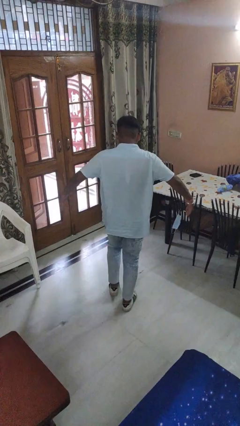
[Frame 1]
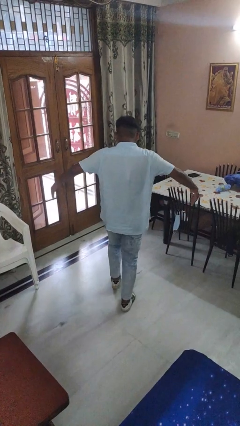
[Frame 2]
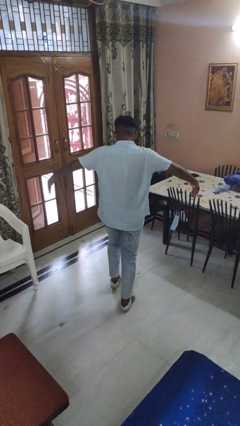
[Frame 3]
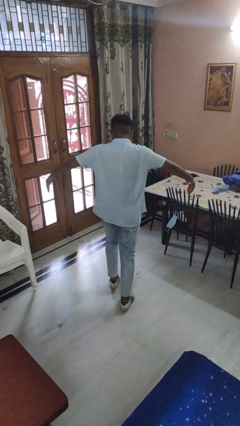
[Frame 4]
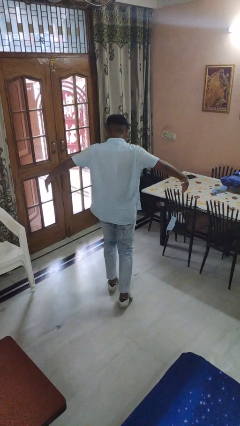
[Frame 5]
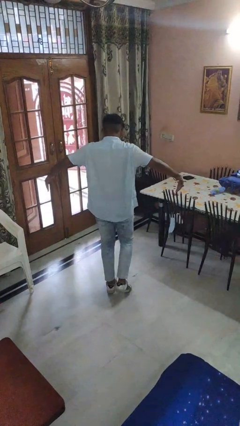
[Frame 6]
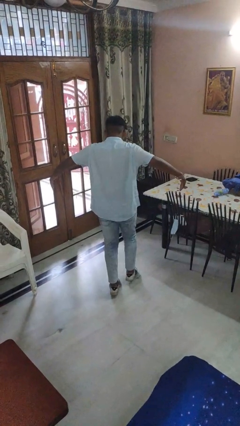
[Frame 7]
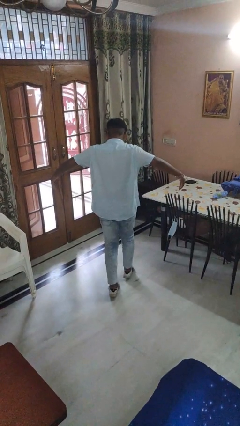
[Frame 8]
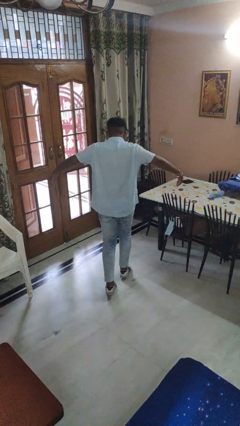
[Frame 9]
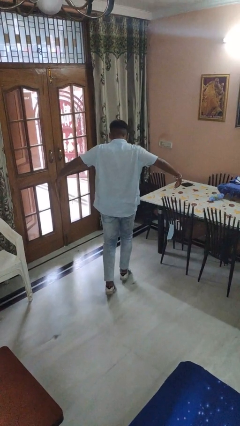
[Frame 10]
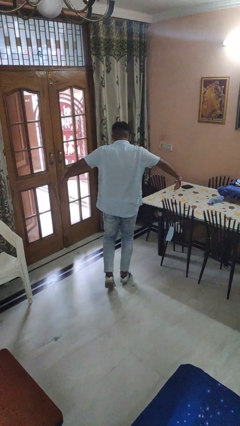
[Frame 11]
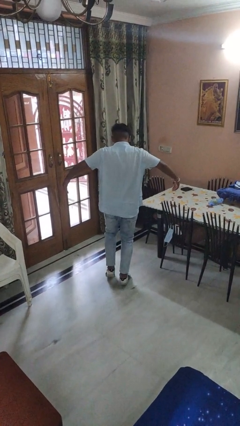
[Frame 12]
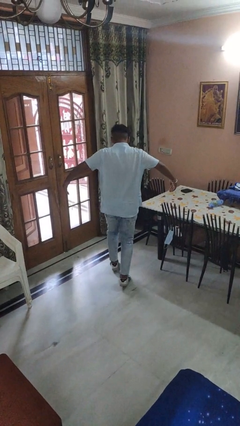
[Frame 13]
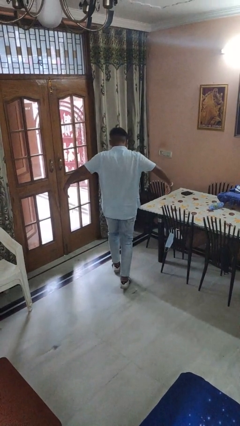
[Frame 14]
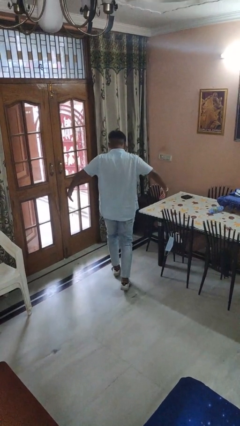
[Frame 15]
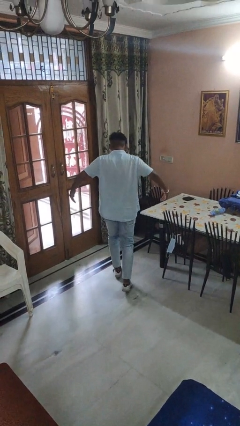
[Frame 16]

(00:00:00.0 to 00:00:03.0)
person walks tiptoe

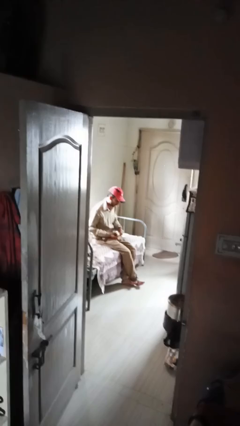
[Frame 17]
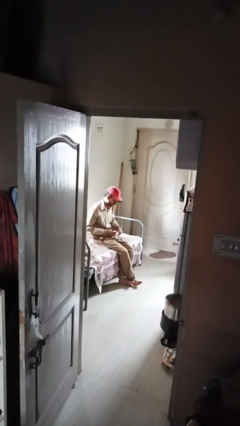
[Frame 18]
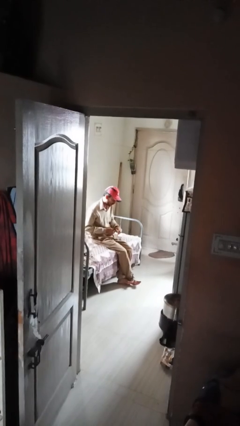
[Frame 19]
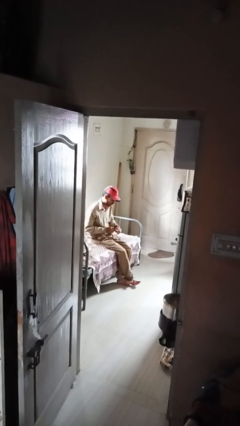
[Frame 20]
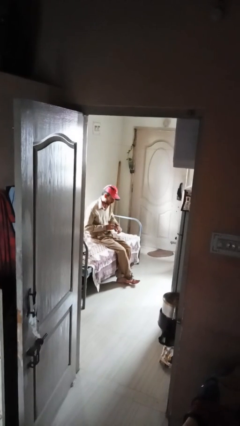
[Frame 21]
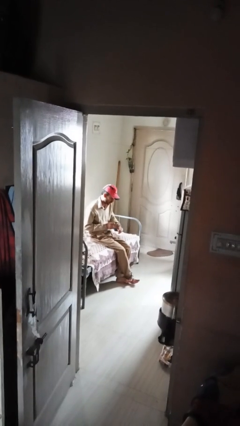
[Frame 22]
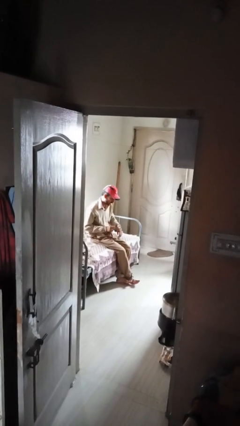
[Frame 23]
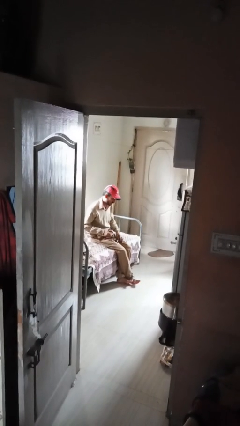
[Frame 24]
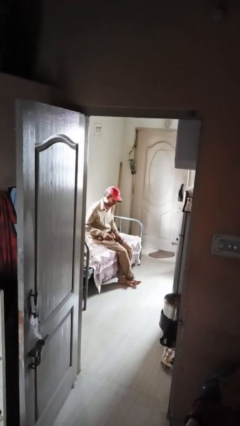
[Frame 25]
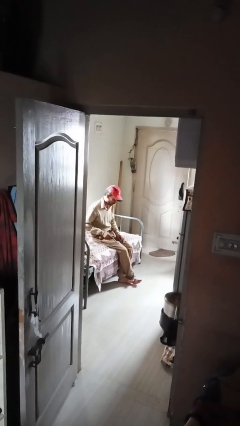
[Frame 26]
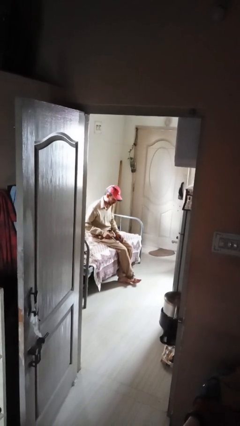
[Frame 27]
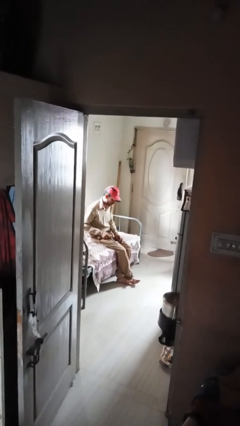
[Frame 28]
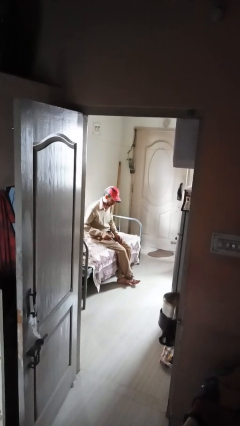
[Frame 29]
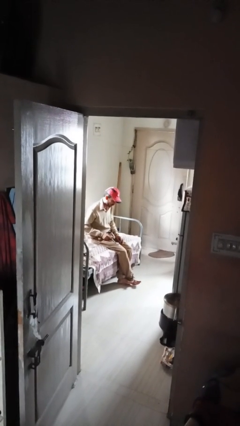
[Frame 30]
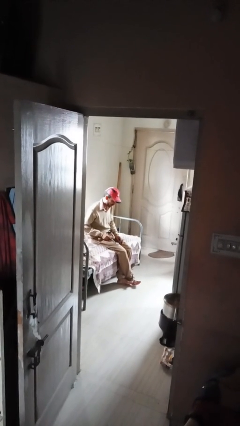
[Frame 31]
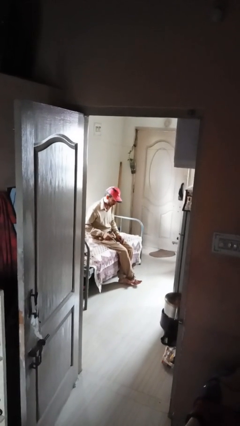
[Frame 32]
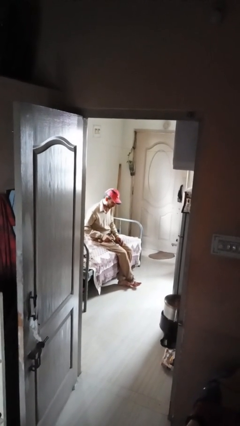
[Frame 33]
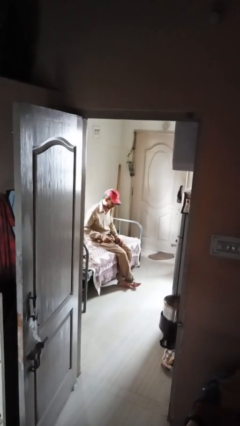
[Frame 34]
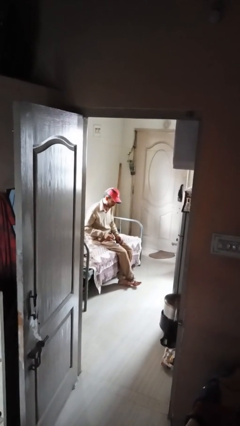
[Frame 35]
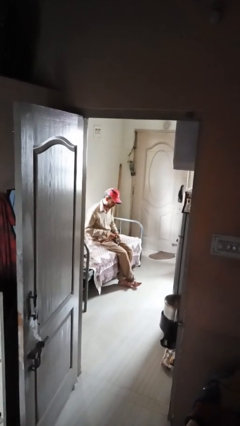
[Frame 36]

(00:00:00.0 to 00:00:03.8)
person takes off wristwatch

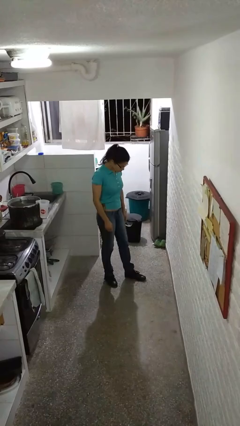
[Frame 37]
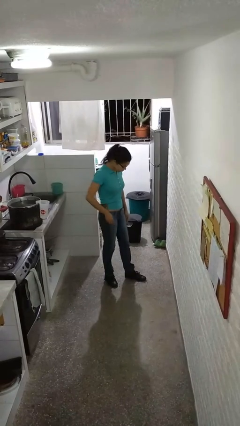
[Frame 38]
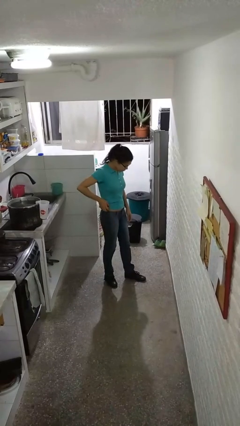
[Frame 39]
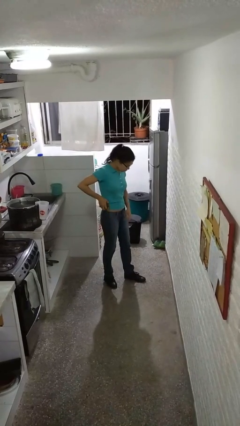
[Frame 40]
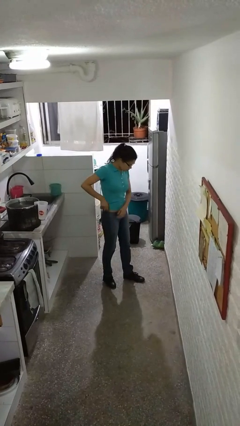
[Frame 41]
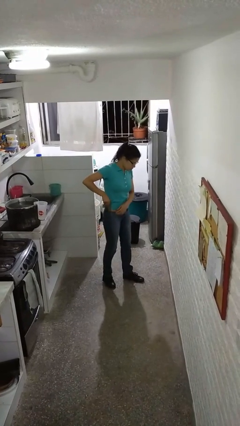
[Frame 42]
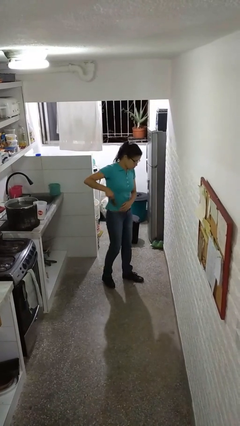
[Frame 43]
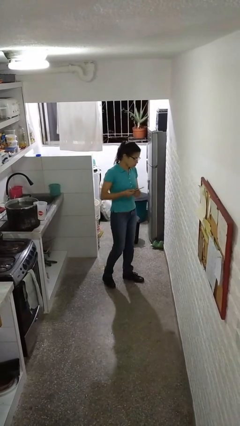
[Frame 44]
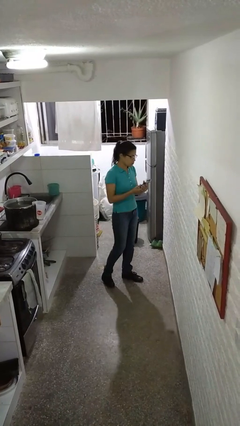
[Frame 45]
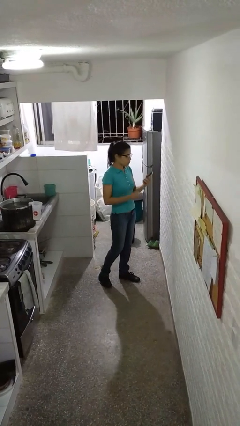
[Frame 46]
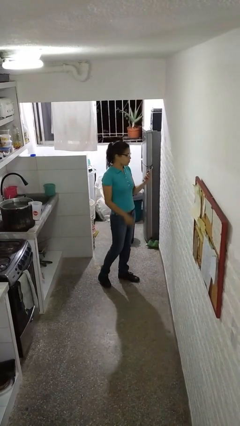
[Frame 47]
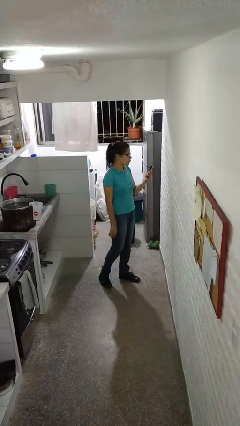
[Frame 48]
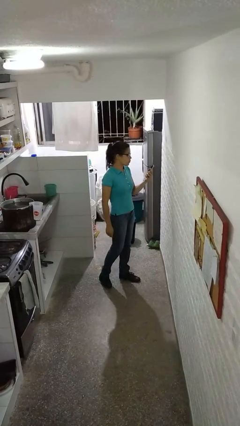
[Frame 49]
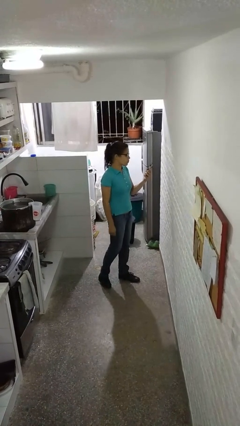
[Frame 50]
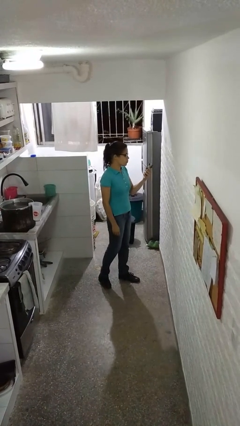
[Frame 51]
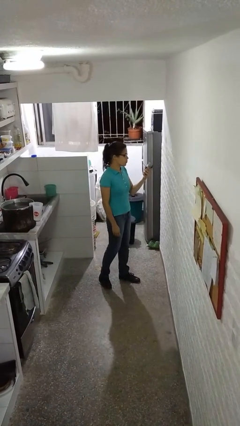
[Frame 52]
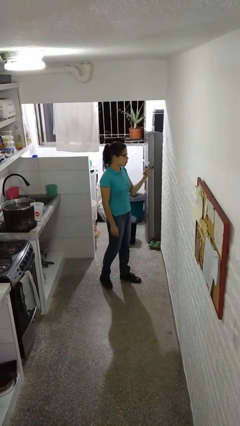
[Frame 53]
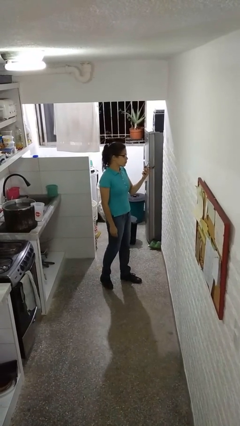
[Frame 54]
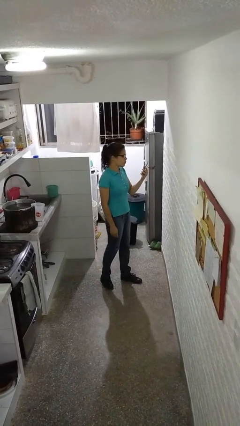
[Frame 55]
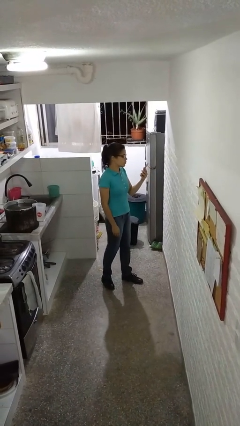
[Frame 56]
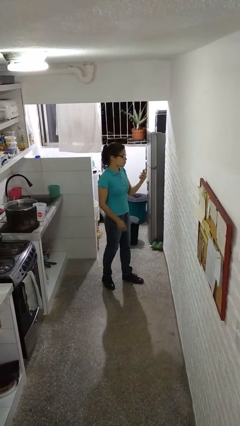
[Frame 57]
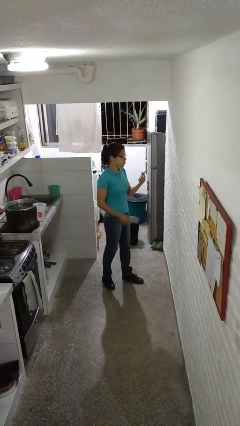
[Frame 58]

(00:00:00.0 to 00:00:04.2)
person takes phone from pocket

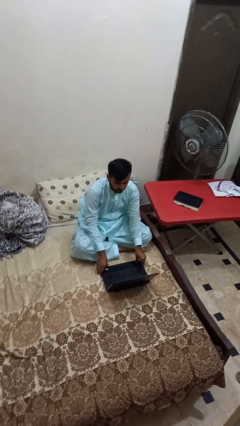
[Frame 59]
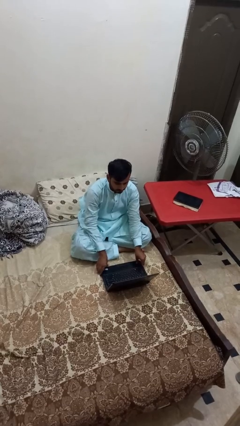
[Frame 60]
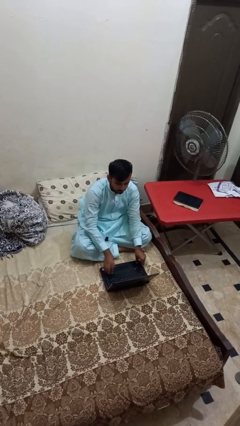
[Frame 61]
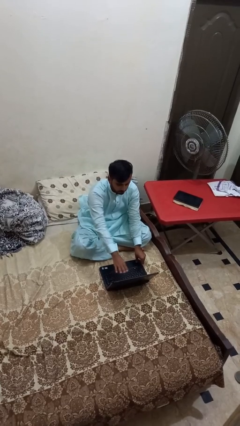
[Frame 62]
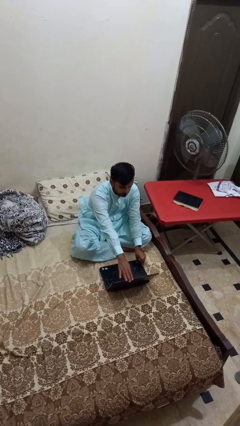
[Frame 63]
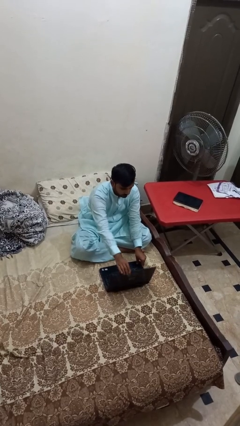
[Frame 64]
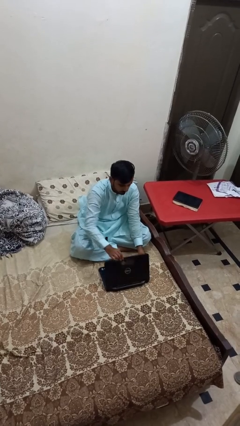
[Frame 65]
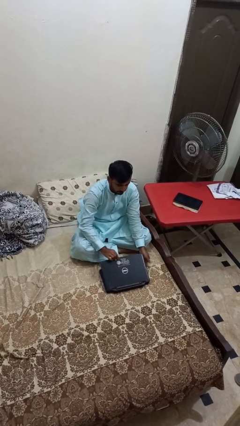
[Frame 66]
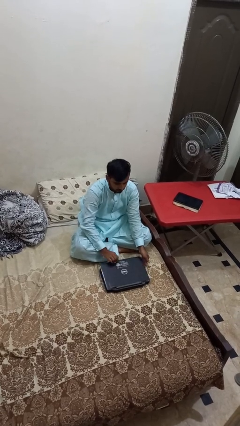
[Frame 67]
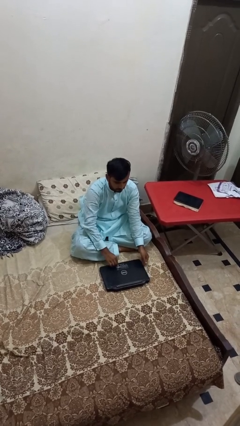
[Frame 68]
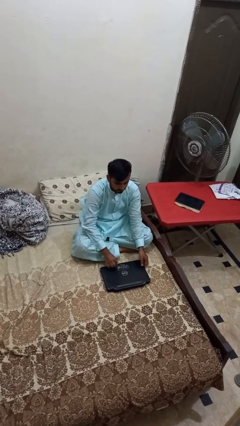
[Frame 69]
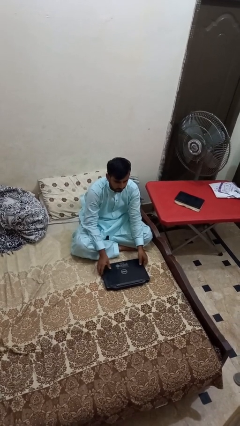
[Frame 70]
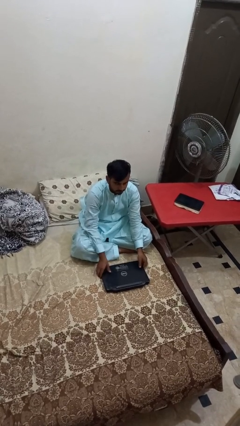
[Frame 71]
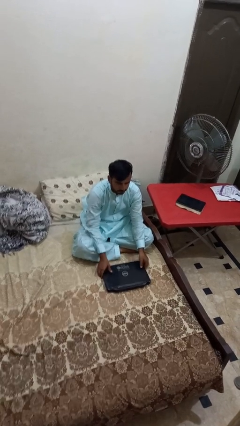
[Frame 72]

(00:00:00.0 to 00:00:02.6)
person closes laptop

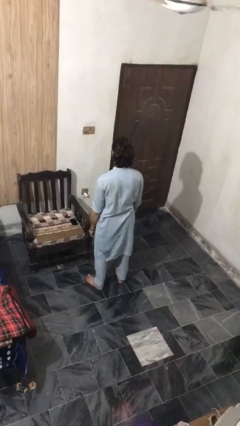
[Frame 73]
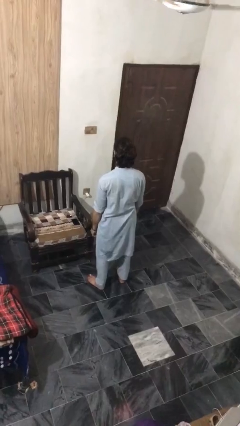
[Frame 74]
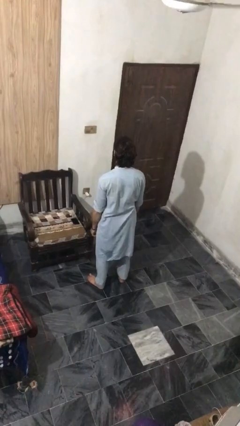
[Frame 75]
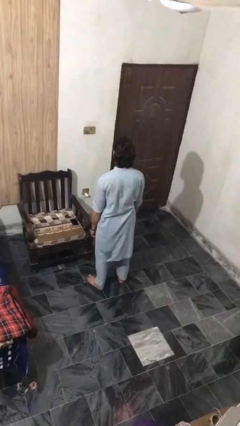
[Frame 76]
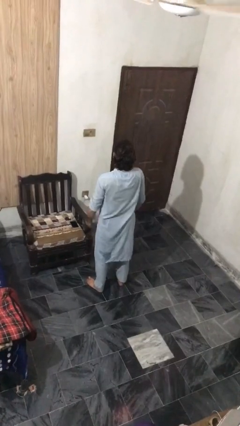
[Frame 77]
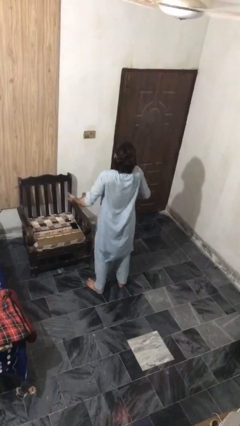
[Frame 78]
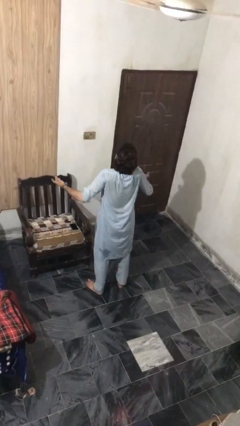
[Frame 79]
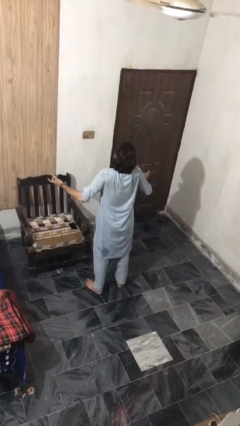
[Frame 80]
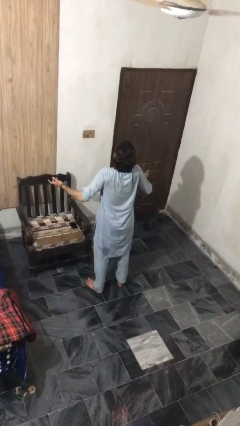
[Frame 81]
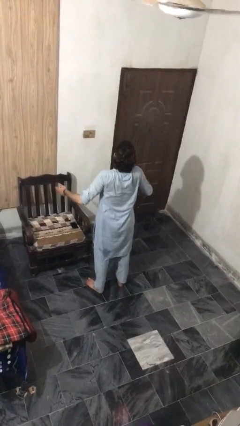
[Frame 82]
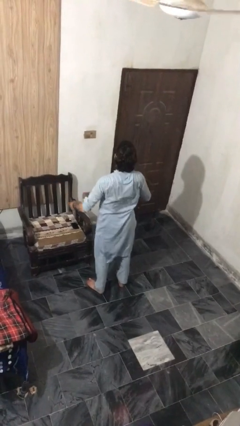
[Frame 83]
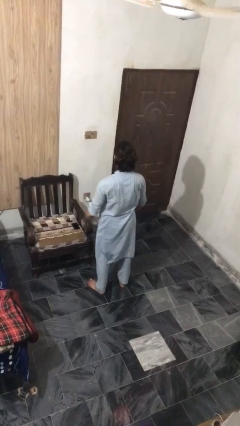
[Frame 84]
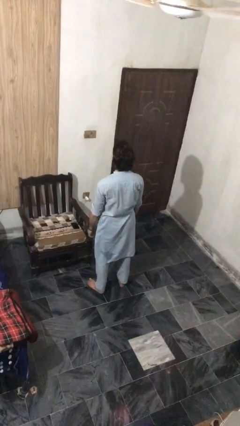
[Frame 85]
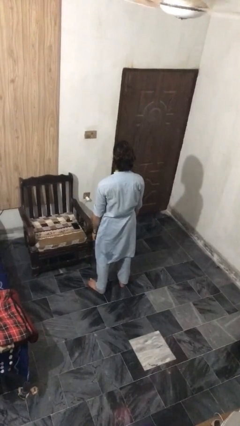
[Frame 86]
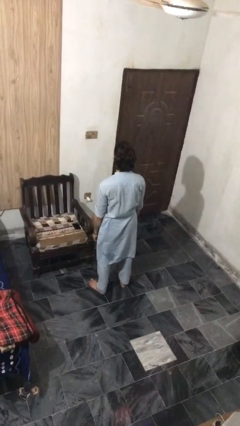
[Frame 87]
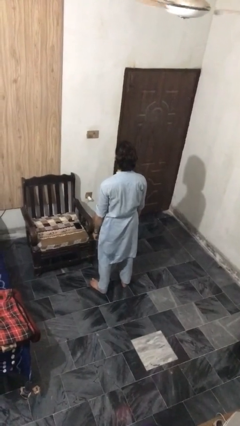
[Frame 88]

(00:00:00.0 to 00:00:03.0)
person shrugs

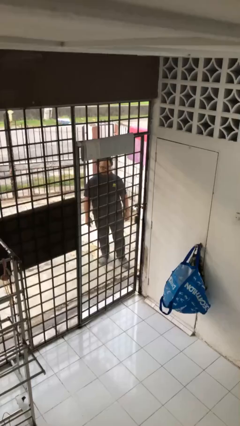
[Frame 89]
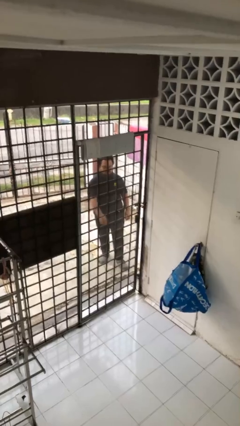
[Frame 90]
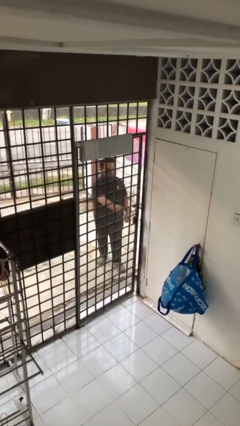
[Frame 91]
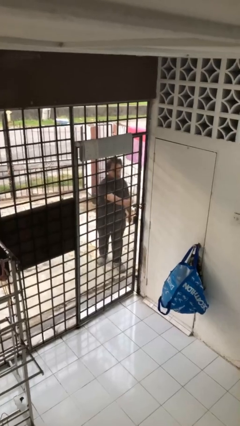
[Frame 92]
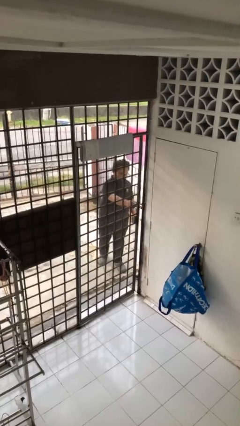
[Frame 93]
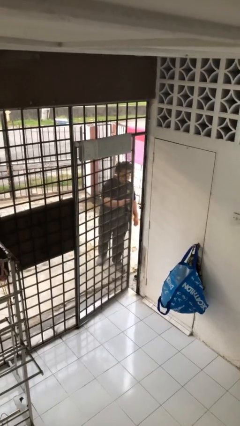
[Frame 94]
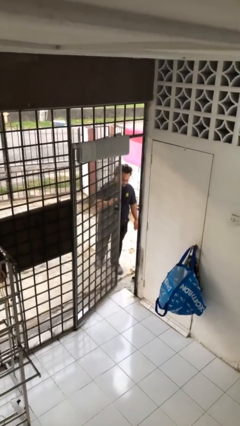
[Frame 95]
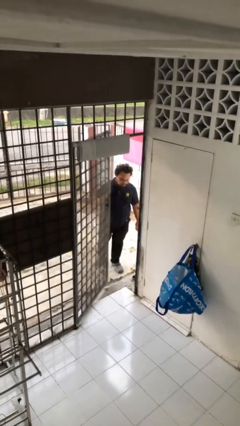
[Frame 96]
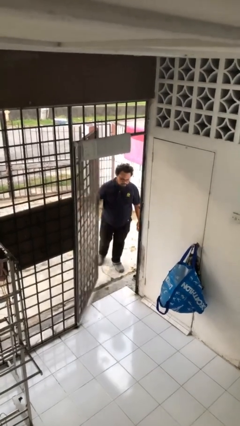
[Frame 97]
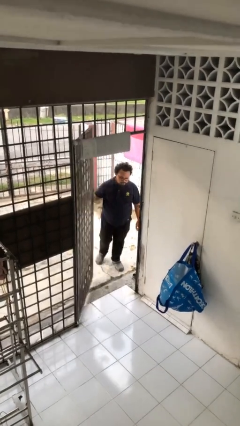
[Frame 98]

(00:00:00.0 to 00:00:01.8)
person opens facility door